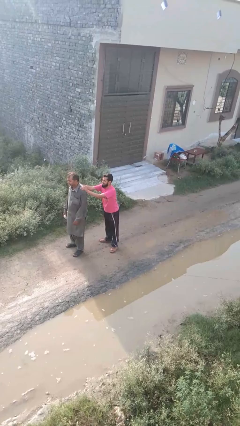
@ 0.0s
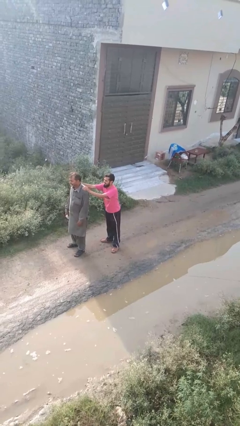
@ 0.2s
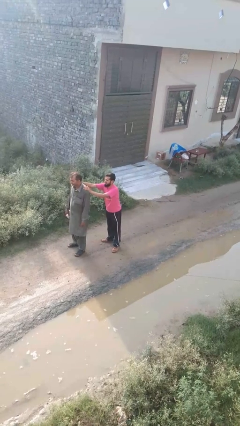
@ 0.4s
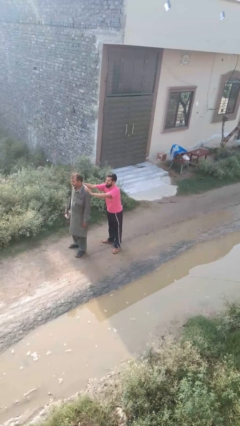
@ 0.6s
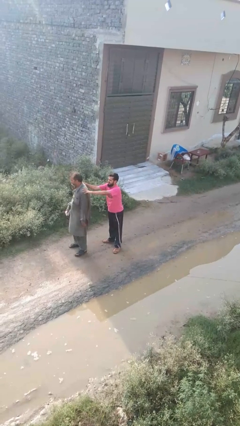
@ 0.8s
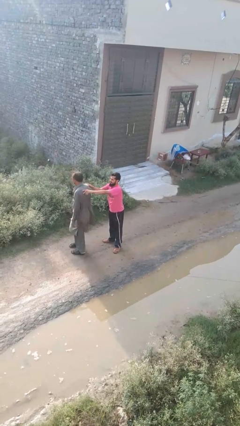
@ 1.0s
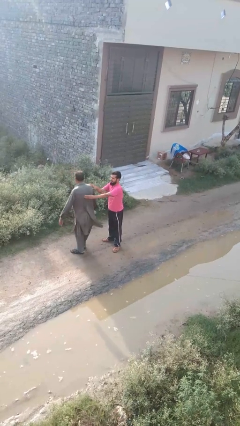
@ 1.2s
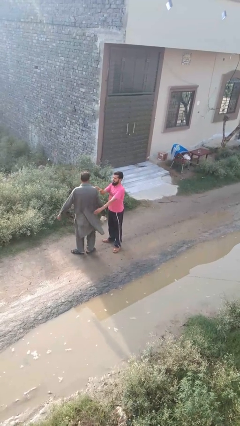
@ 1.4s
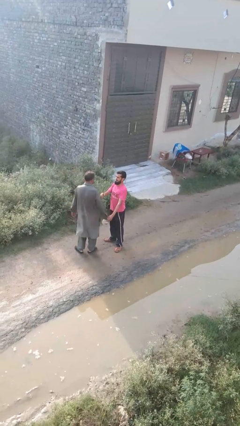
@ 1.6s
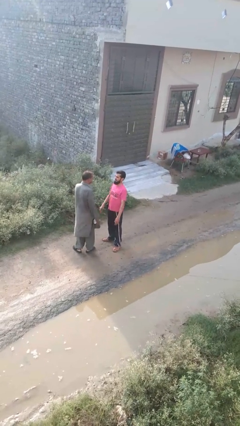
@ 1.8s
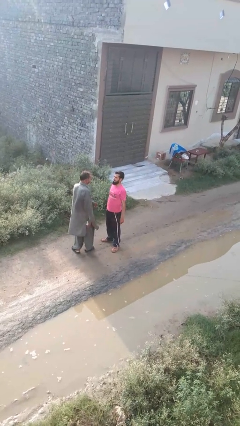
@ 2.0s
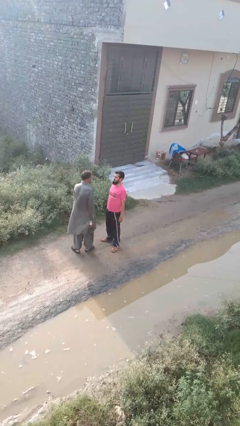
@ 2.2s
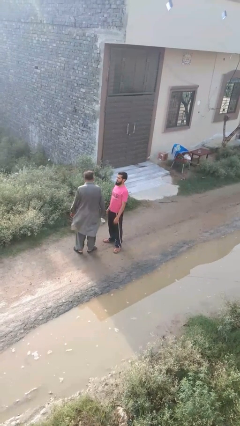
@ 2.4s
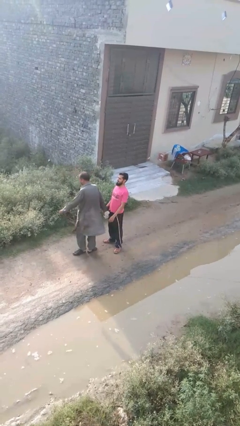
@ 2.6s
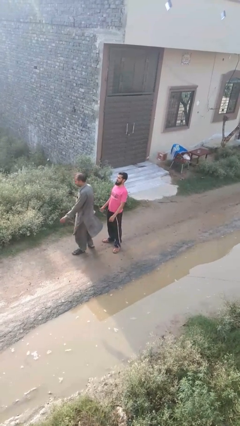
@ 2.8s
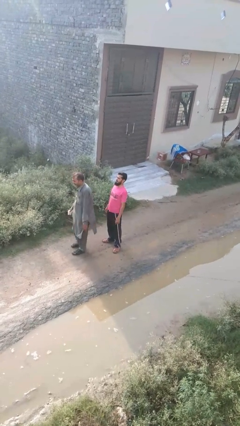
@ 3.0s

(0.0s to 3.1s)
person spins person around

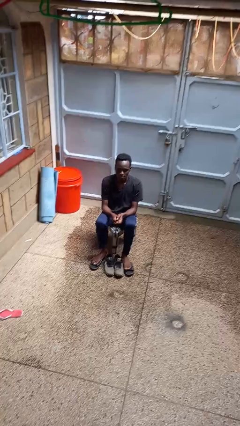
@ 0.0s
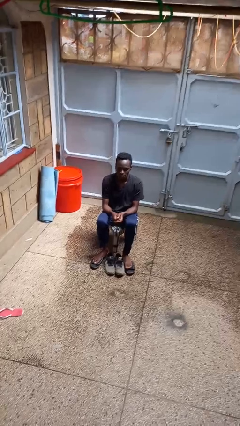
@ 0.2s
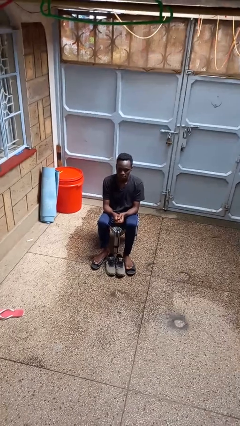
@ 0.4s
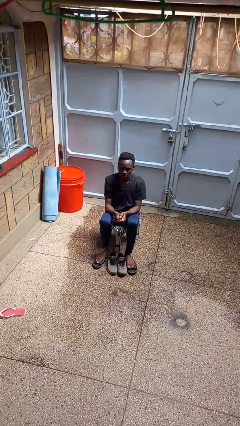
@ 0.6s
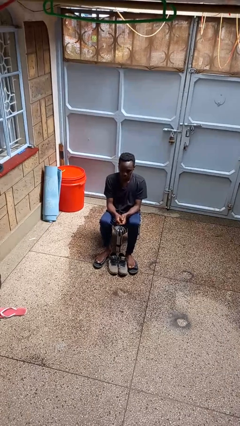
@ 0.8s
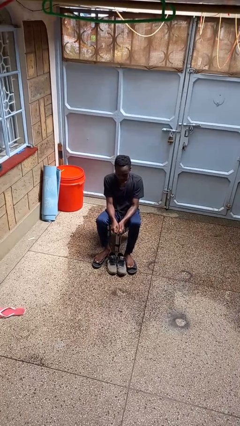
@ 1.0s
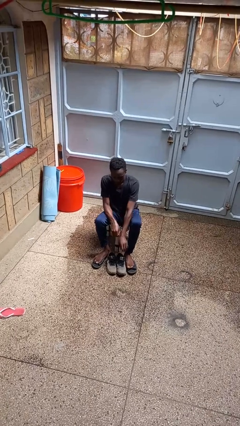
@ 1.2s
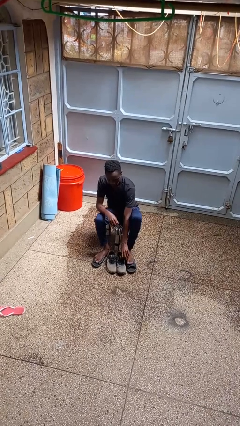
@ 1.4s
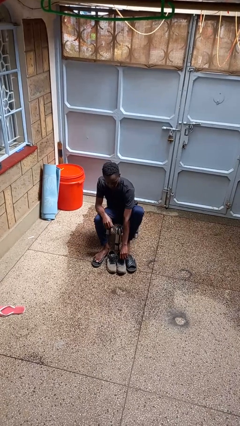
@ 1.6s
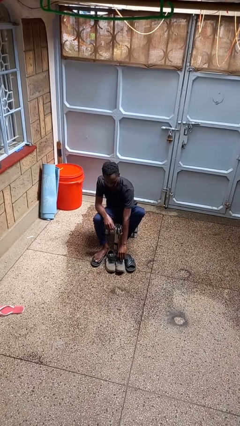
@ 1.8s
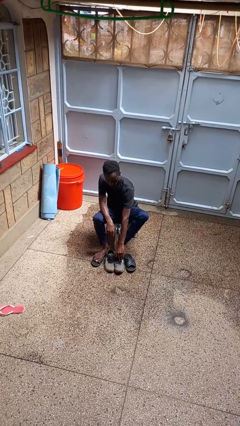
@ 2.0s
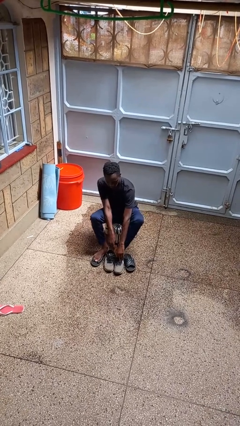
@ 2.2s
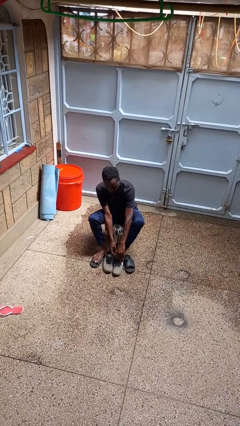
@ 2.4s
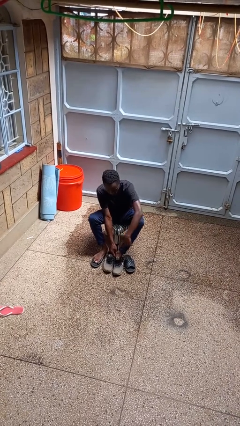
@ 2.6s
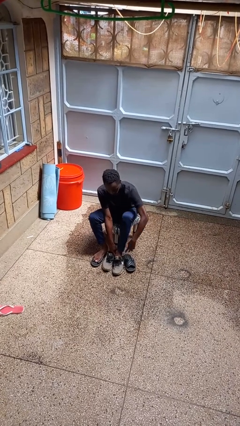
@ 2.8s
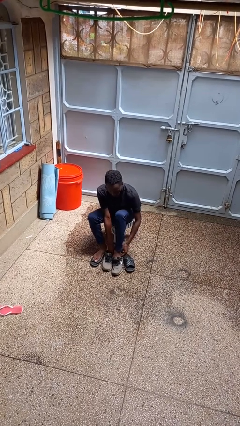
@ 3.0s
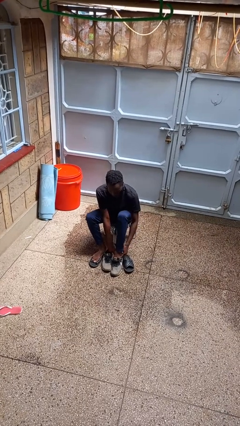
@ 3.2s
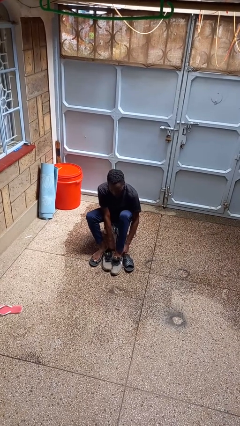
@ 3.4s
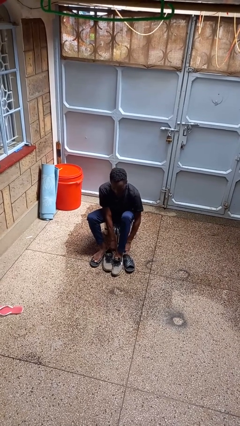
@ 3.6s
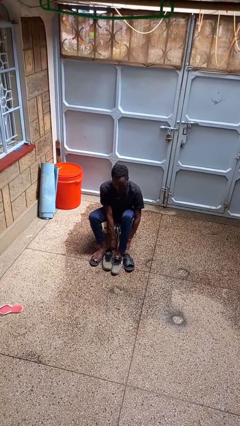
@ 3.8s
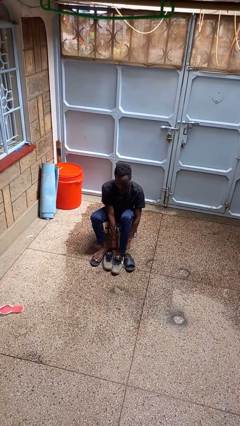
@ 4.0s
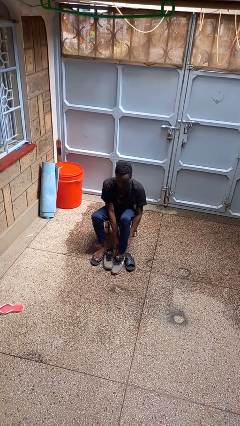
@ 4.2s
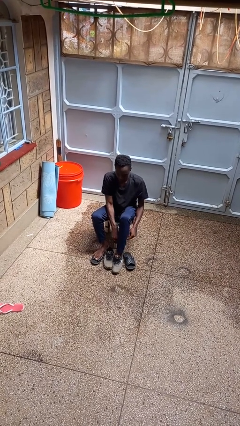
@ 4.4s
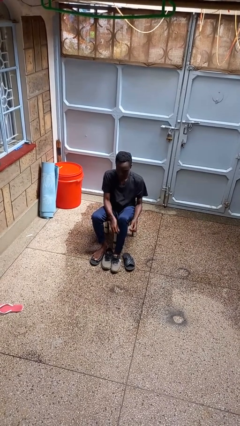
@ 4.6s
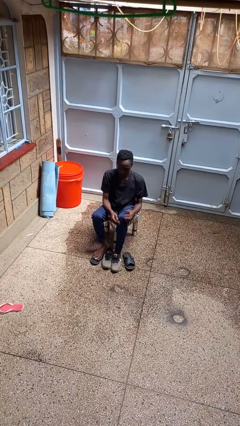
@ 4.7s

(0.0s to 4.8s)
person puts on shoes

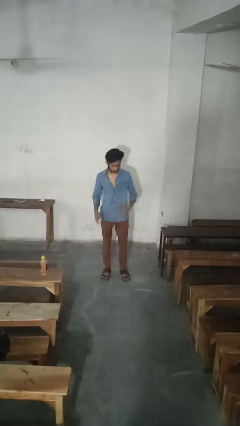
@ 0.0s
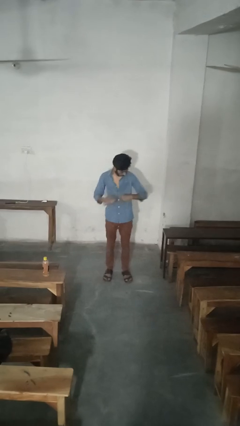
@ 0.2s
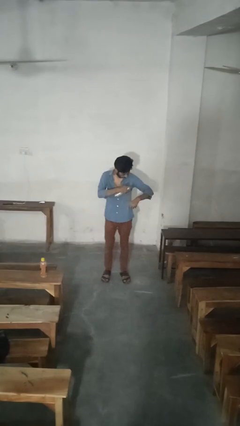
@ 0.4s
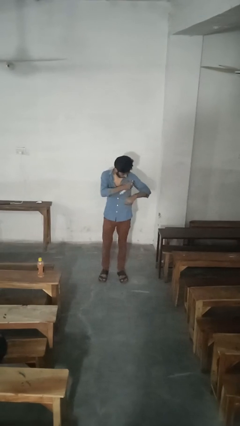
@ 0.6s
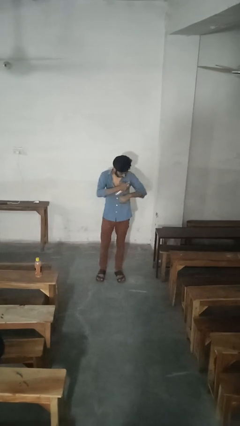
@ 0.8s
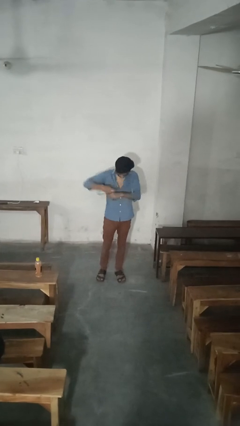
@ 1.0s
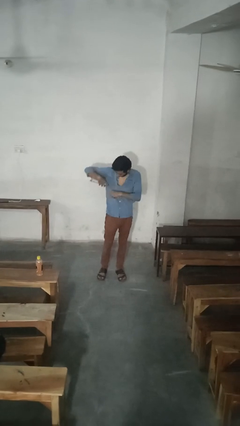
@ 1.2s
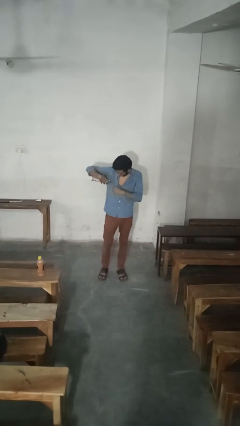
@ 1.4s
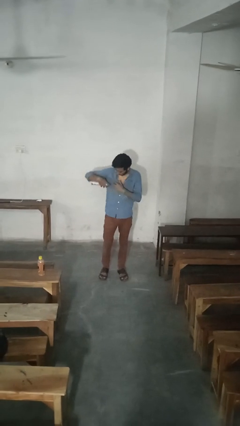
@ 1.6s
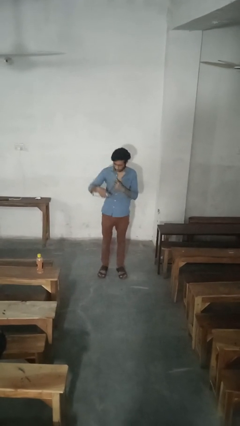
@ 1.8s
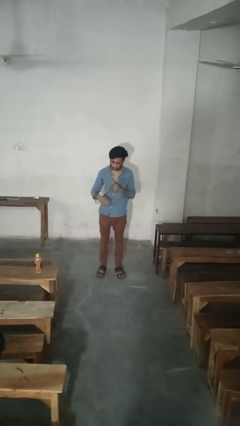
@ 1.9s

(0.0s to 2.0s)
person applies deodorant

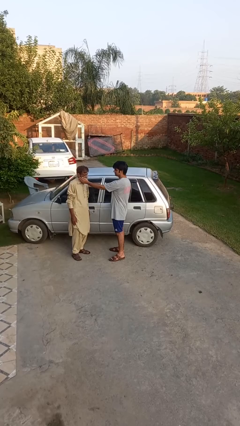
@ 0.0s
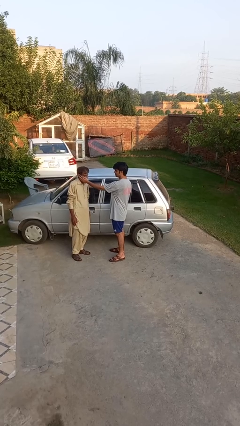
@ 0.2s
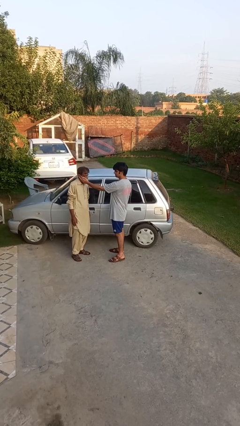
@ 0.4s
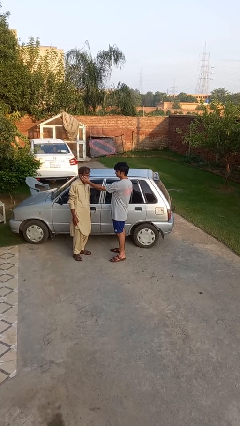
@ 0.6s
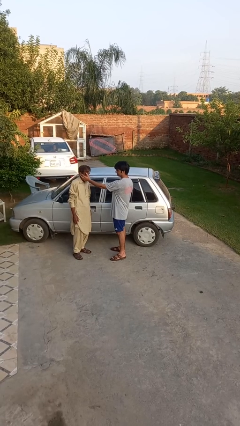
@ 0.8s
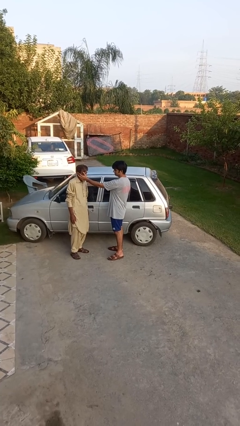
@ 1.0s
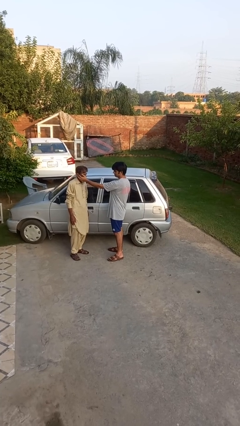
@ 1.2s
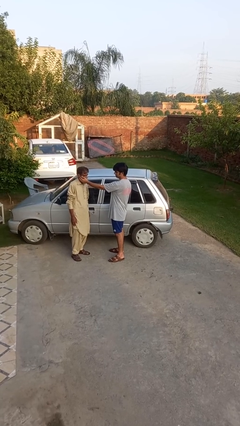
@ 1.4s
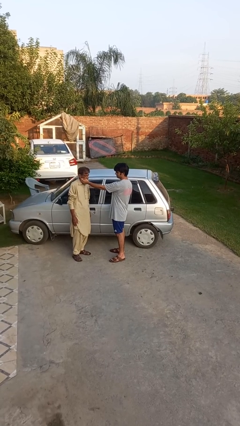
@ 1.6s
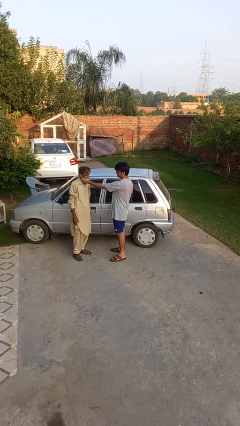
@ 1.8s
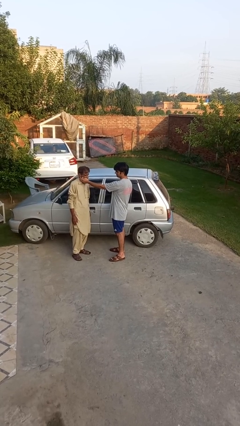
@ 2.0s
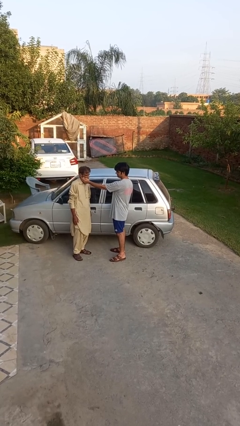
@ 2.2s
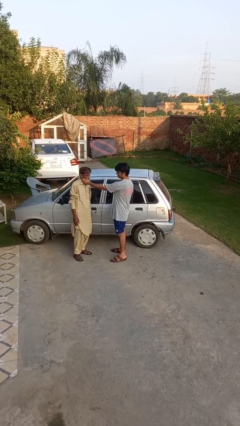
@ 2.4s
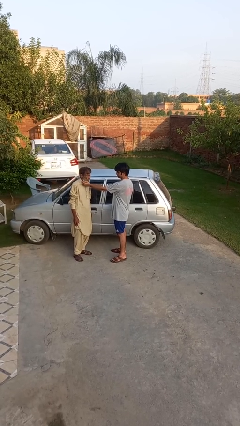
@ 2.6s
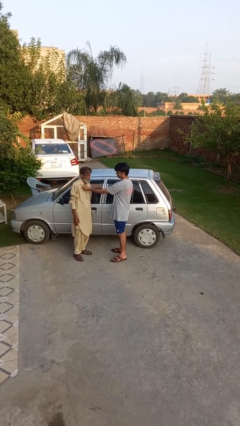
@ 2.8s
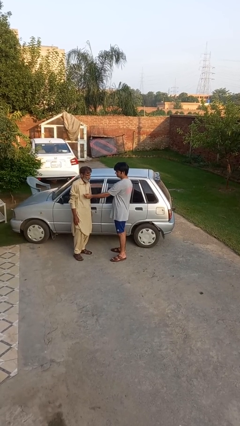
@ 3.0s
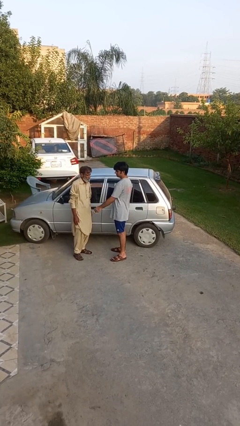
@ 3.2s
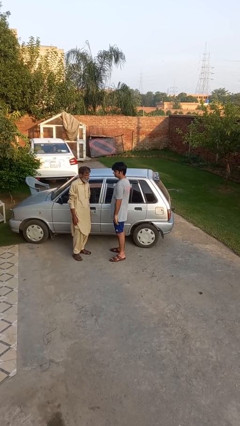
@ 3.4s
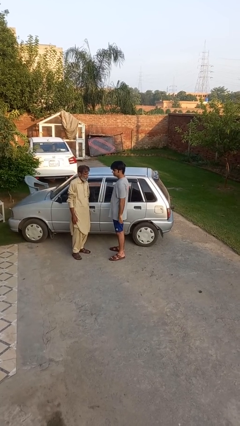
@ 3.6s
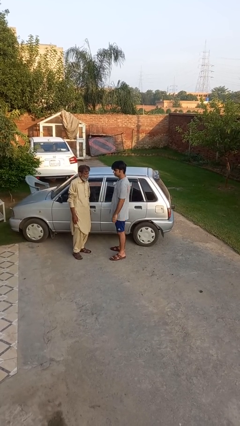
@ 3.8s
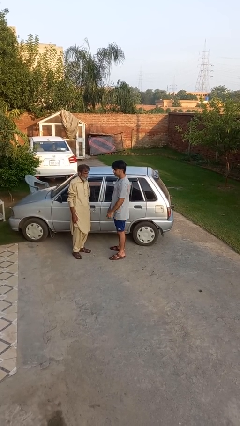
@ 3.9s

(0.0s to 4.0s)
person touches face of person

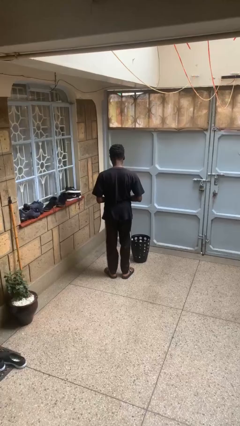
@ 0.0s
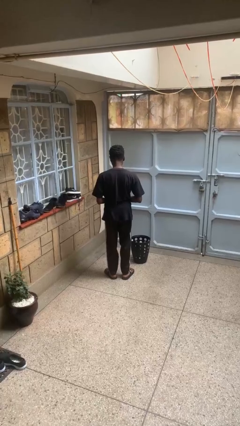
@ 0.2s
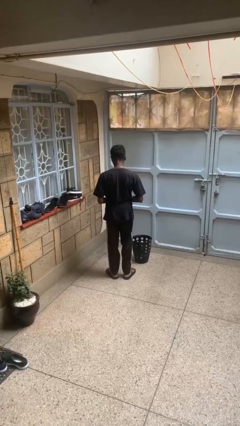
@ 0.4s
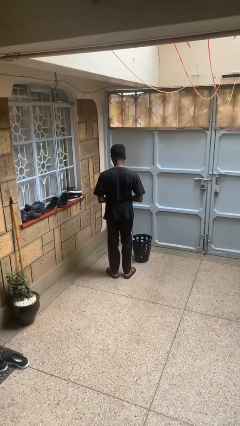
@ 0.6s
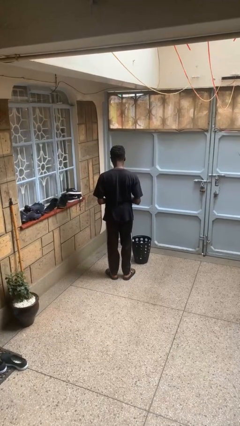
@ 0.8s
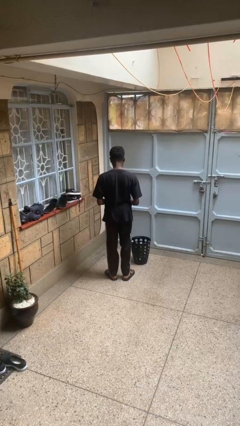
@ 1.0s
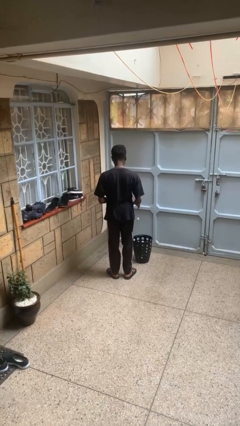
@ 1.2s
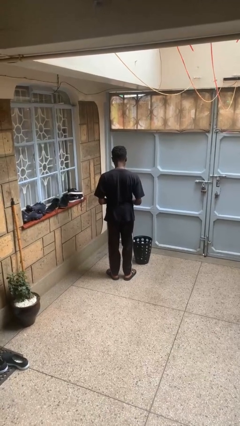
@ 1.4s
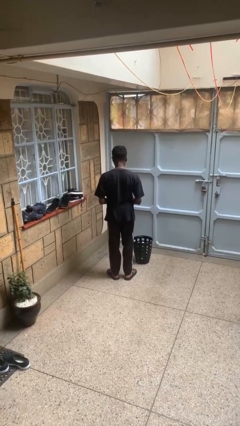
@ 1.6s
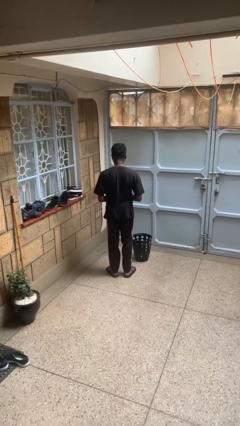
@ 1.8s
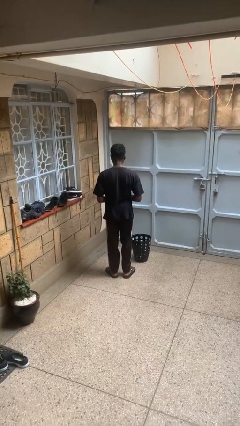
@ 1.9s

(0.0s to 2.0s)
person discards trash

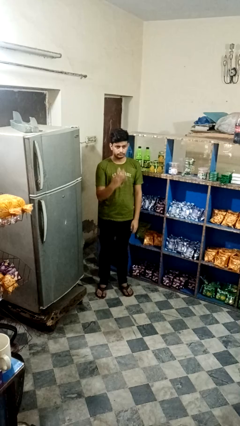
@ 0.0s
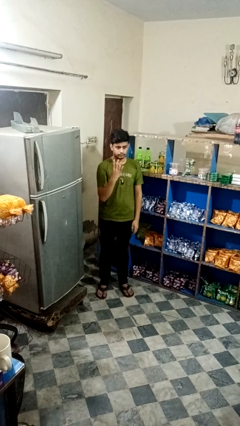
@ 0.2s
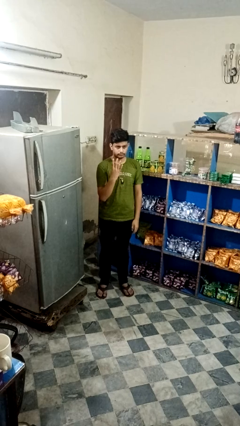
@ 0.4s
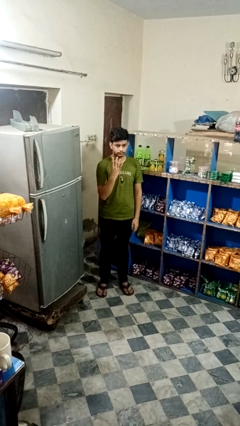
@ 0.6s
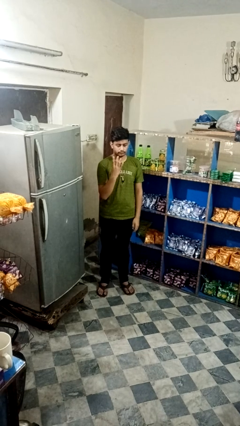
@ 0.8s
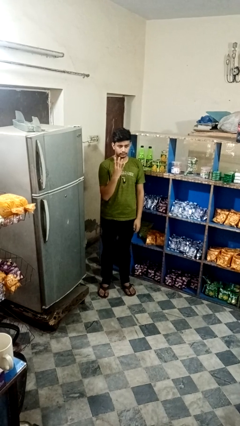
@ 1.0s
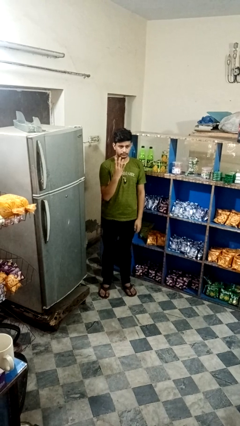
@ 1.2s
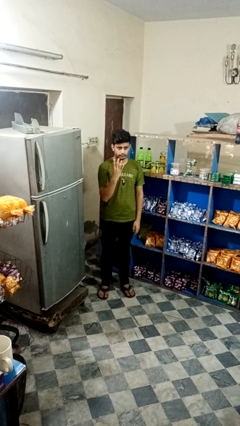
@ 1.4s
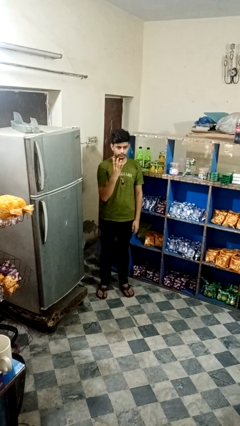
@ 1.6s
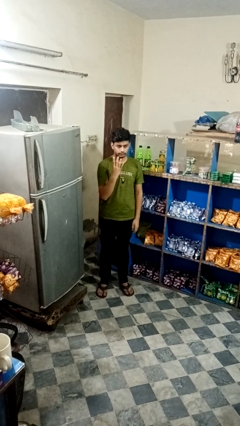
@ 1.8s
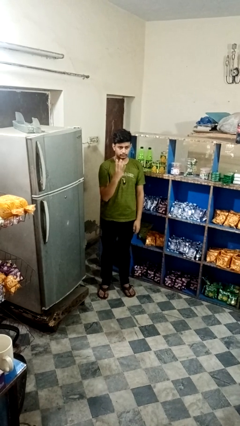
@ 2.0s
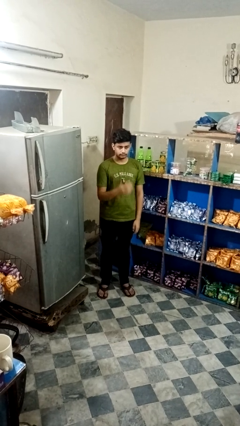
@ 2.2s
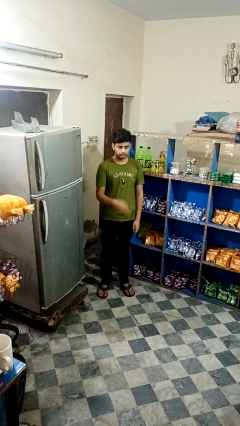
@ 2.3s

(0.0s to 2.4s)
person gestures number four
